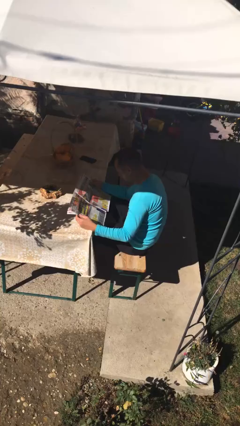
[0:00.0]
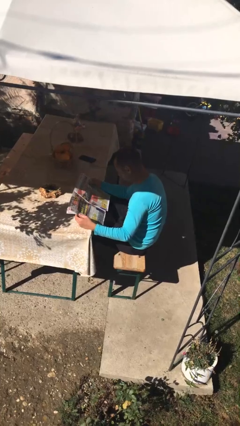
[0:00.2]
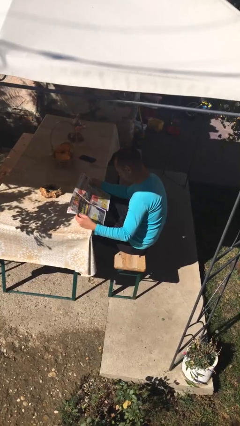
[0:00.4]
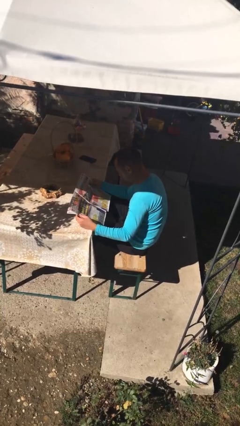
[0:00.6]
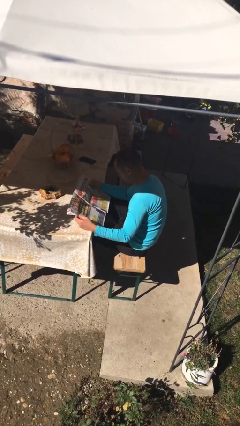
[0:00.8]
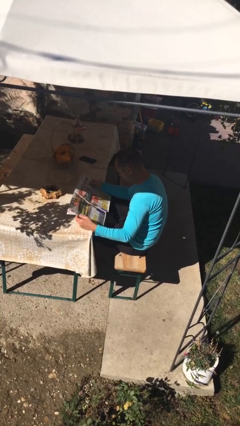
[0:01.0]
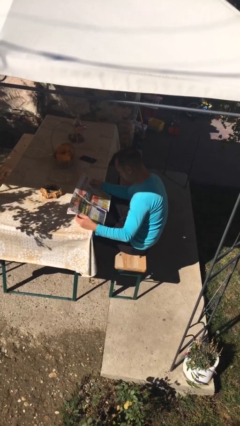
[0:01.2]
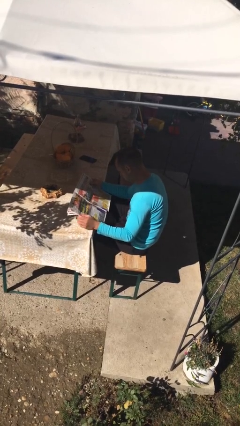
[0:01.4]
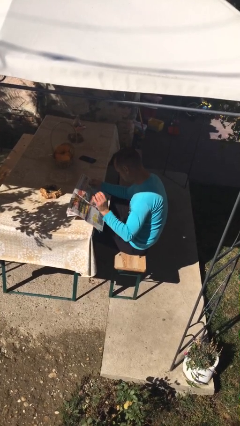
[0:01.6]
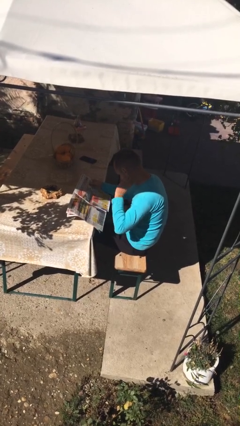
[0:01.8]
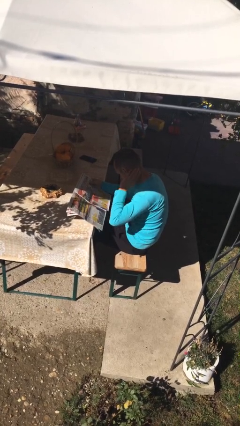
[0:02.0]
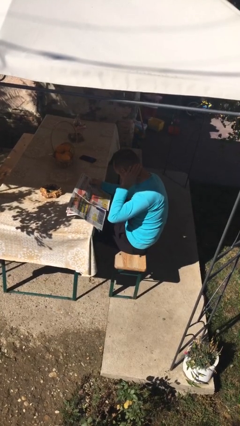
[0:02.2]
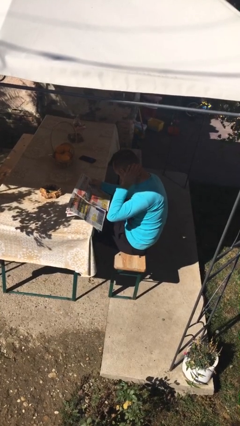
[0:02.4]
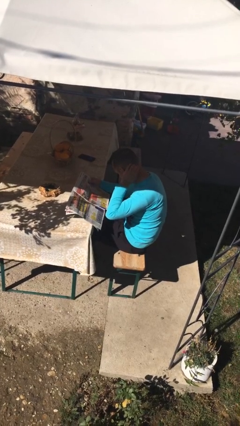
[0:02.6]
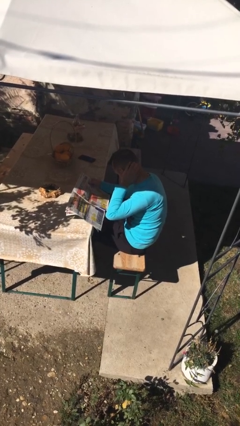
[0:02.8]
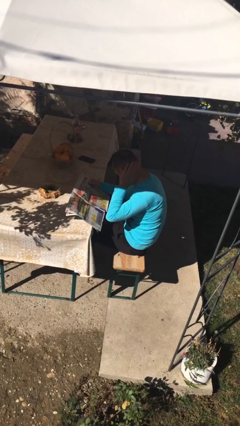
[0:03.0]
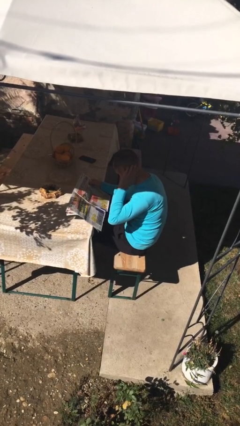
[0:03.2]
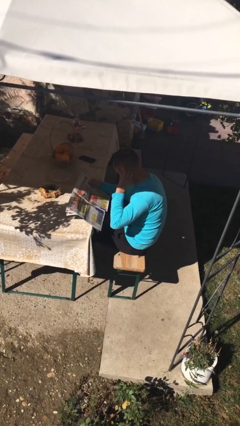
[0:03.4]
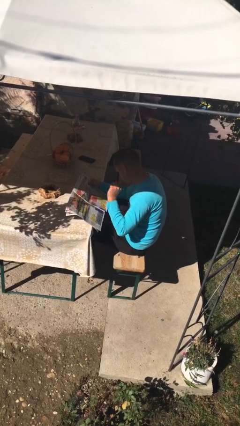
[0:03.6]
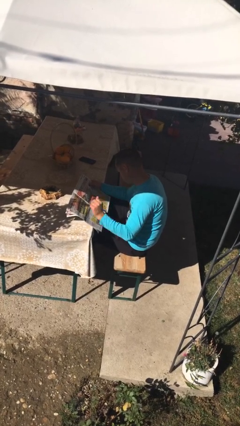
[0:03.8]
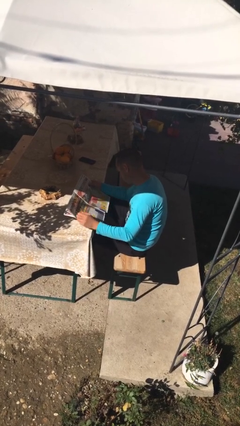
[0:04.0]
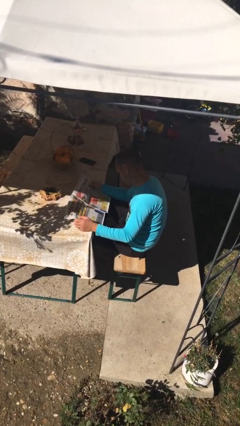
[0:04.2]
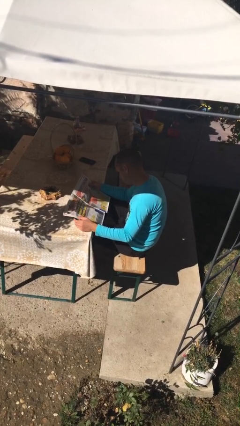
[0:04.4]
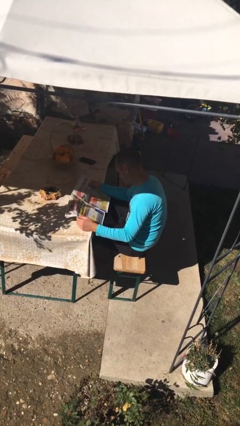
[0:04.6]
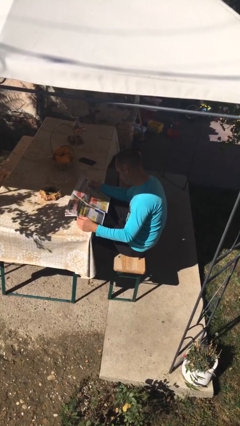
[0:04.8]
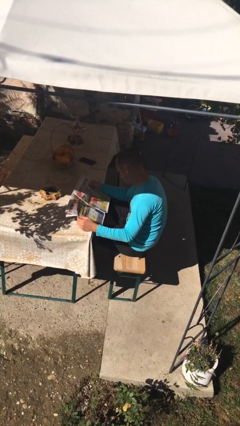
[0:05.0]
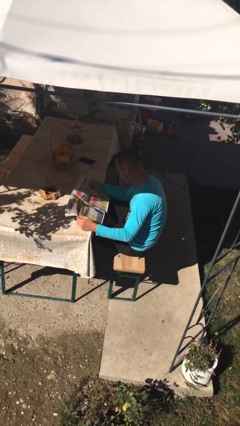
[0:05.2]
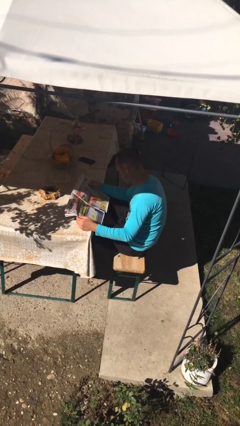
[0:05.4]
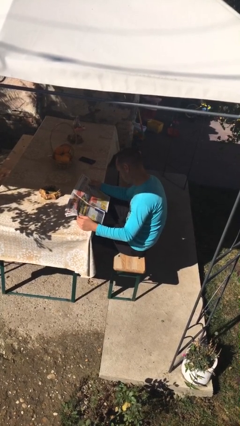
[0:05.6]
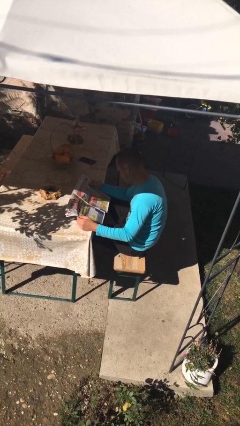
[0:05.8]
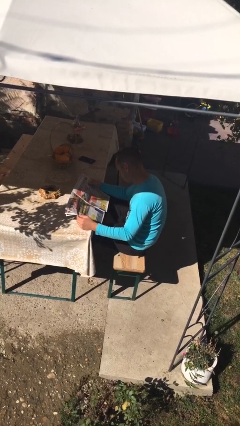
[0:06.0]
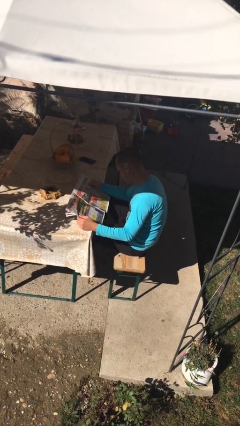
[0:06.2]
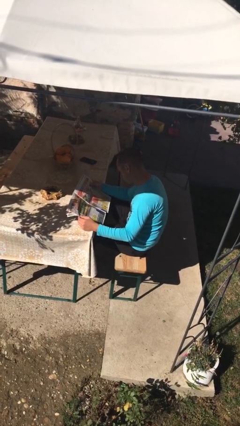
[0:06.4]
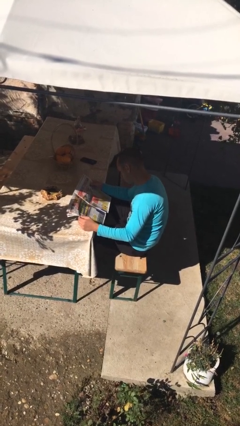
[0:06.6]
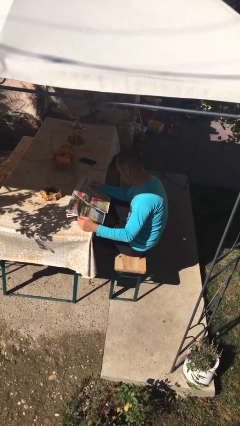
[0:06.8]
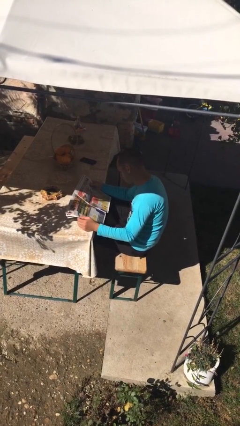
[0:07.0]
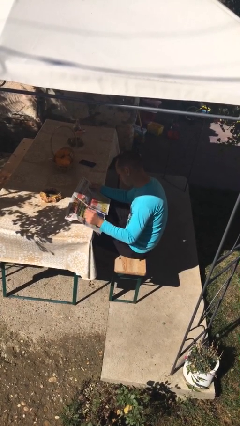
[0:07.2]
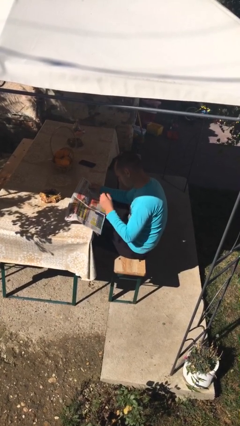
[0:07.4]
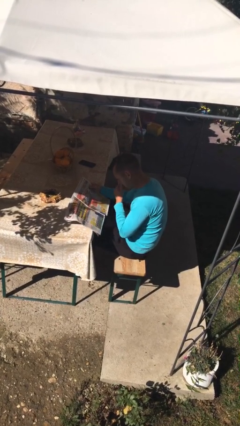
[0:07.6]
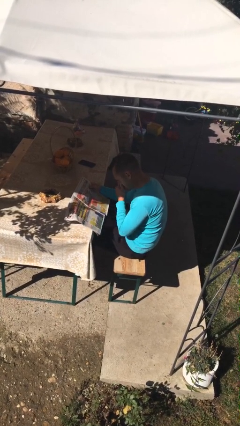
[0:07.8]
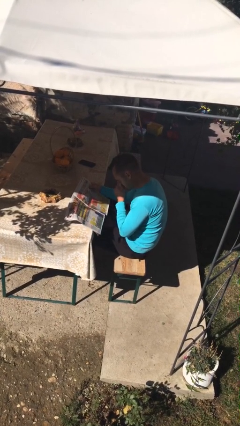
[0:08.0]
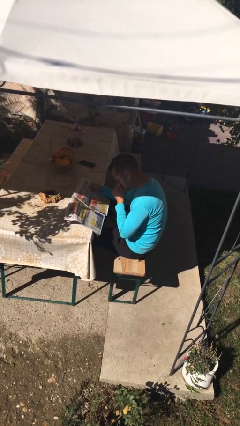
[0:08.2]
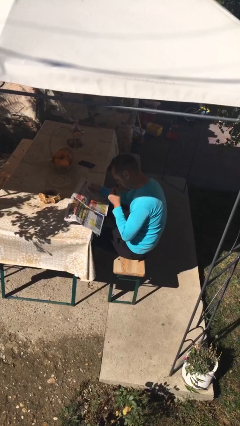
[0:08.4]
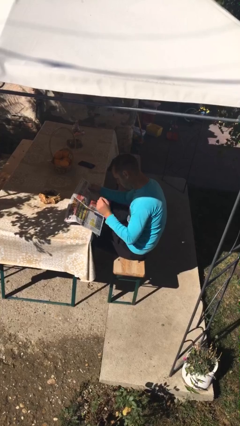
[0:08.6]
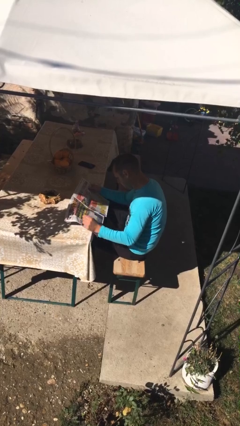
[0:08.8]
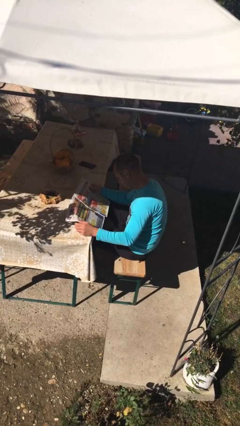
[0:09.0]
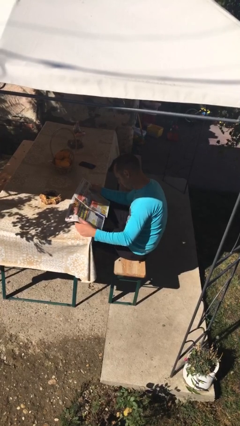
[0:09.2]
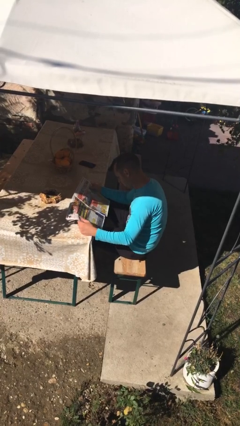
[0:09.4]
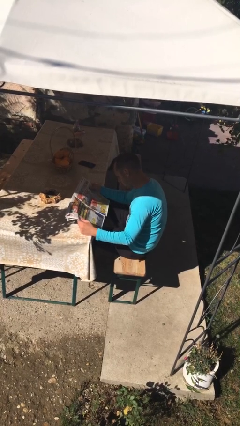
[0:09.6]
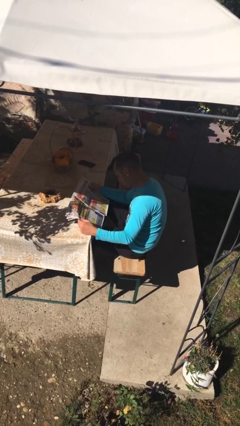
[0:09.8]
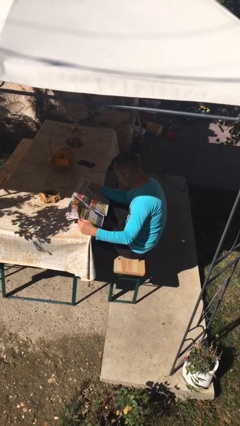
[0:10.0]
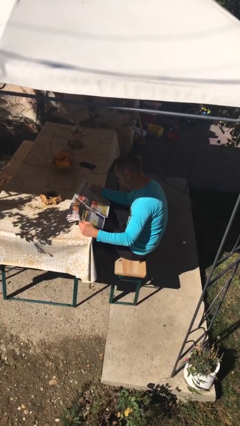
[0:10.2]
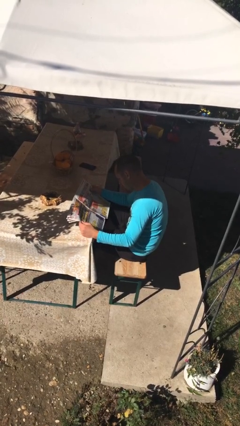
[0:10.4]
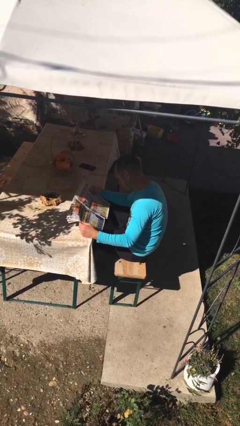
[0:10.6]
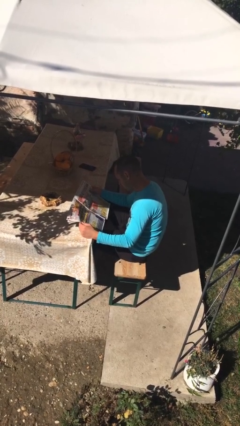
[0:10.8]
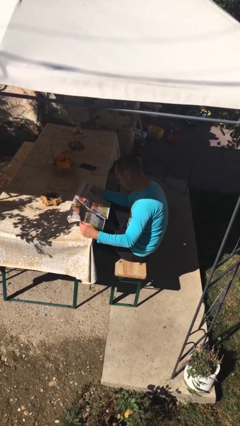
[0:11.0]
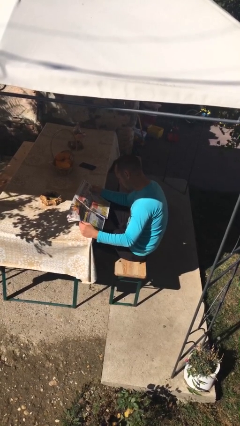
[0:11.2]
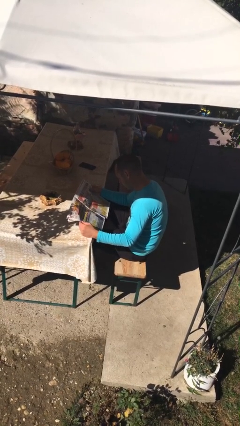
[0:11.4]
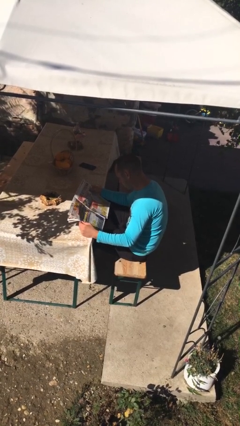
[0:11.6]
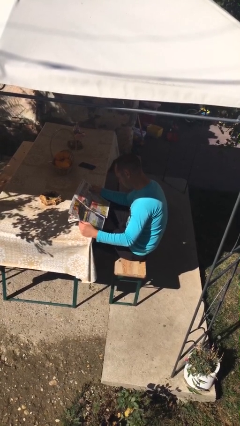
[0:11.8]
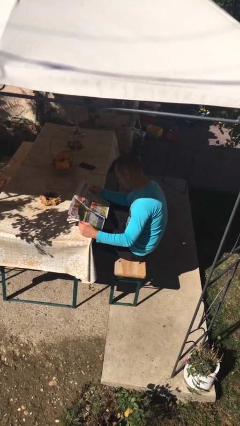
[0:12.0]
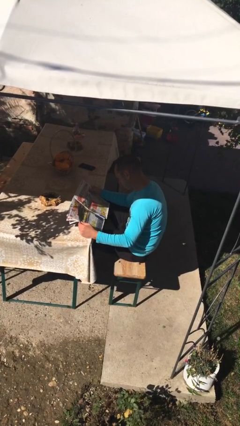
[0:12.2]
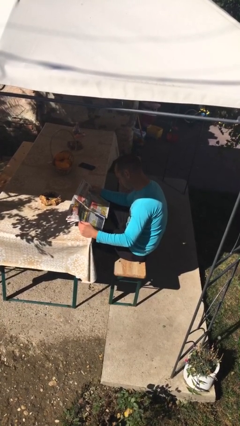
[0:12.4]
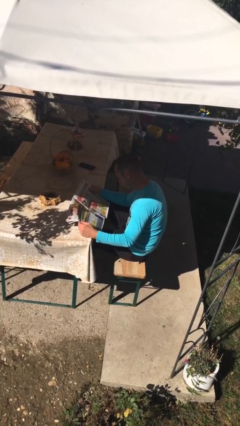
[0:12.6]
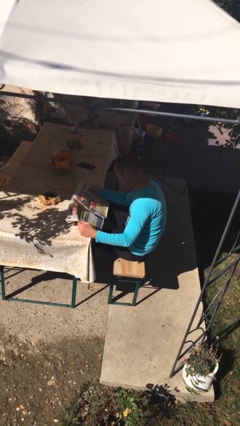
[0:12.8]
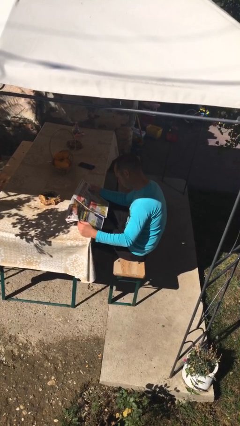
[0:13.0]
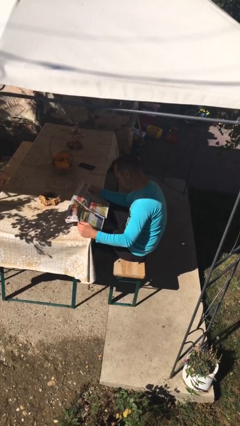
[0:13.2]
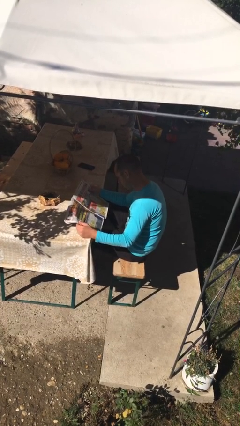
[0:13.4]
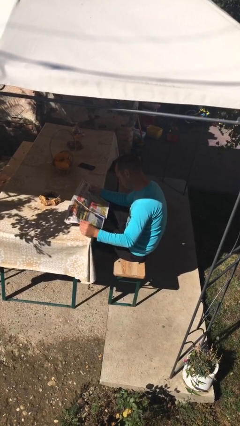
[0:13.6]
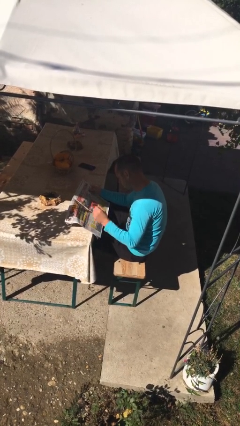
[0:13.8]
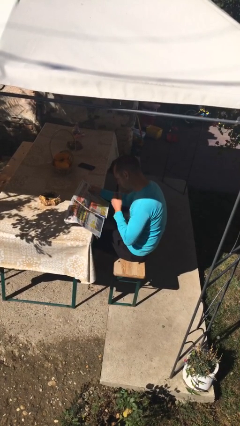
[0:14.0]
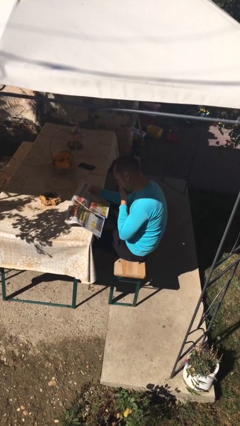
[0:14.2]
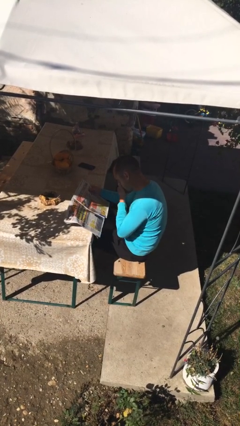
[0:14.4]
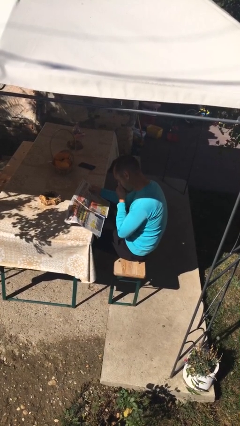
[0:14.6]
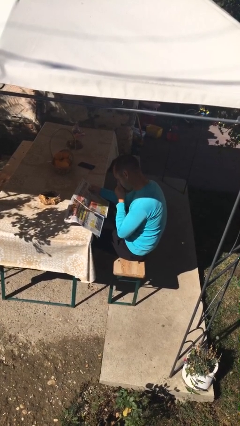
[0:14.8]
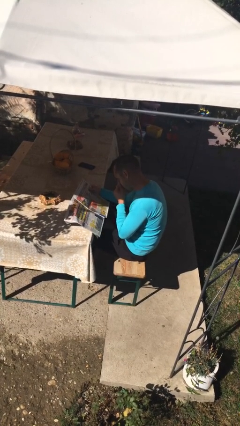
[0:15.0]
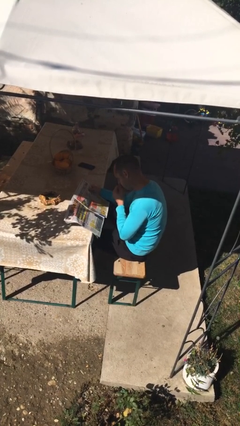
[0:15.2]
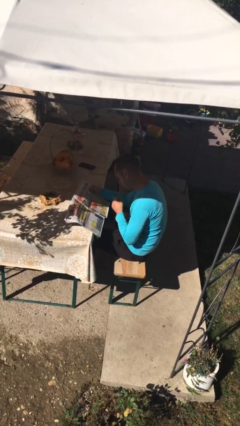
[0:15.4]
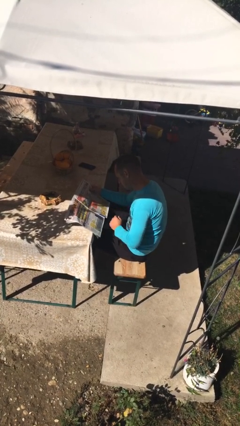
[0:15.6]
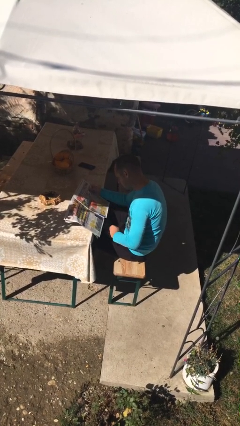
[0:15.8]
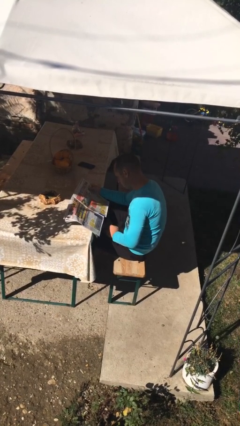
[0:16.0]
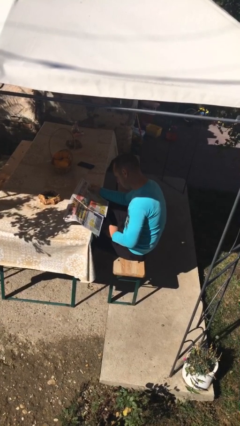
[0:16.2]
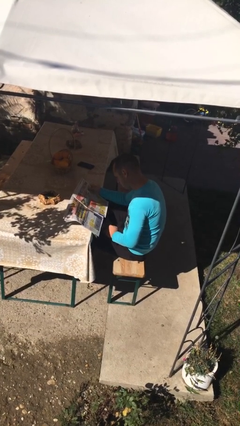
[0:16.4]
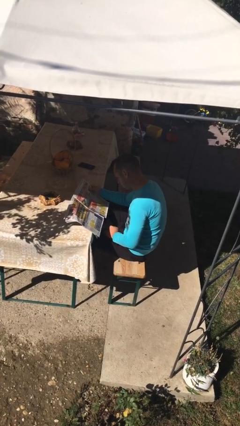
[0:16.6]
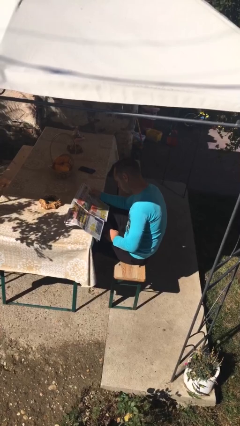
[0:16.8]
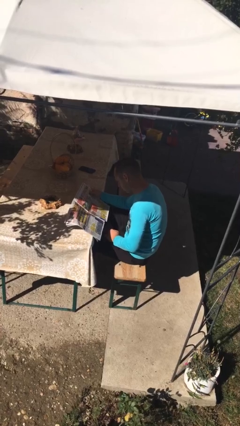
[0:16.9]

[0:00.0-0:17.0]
person reads document

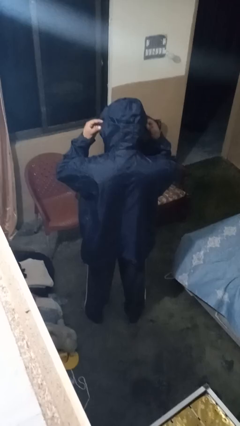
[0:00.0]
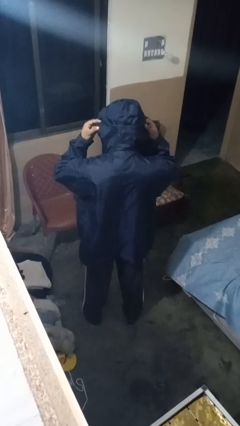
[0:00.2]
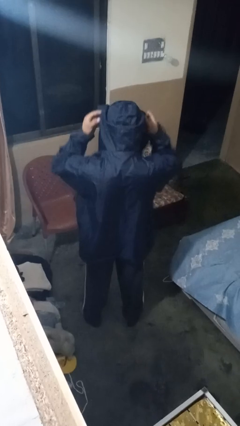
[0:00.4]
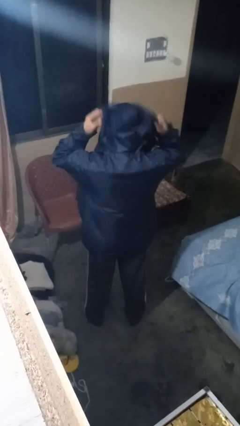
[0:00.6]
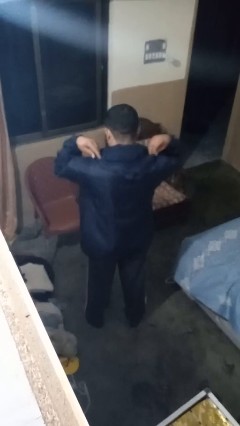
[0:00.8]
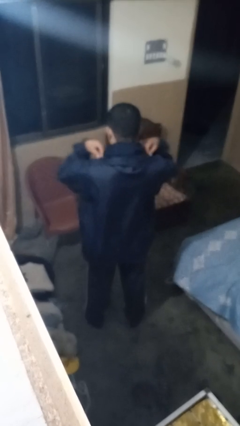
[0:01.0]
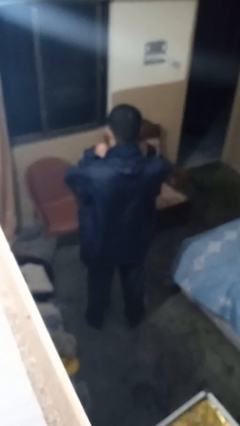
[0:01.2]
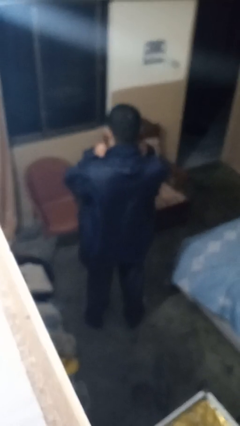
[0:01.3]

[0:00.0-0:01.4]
person takes off hoodie
